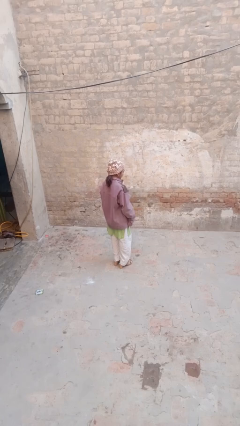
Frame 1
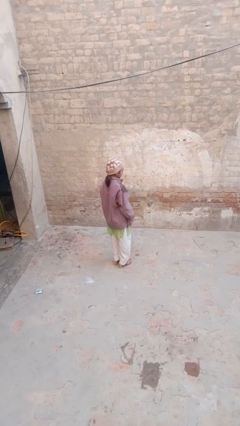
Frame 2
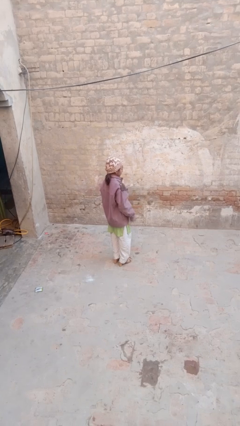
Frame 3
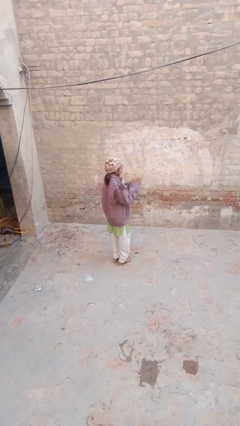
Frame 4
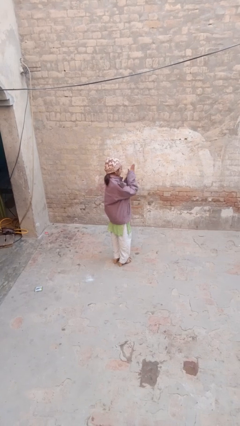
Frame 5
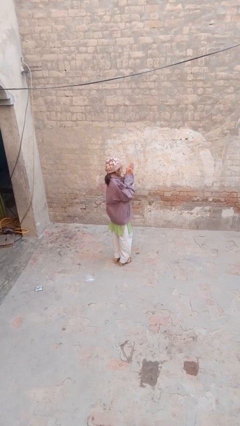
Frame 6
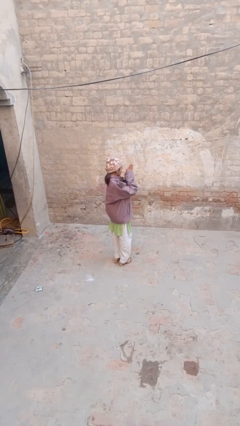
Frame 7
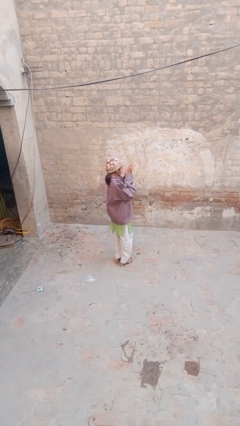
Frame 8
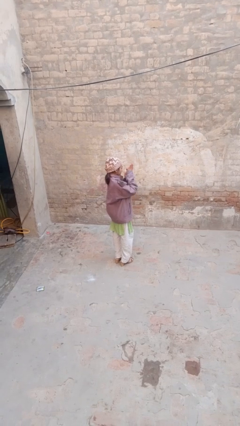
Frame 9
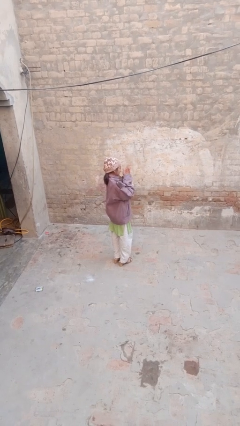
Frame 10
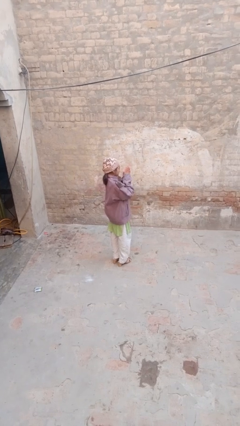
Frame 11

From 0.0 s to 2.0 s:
person blows into hands

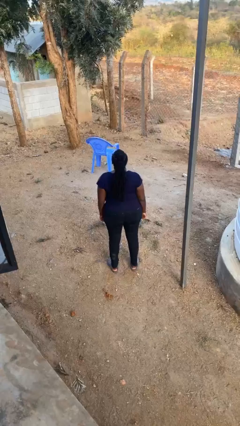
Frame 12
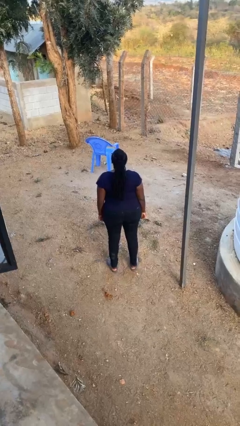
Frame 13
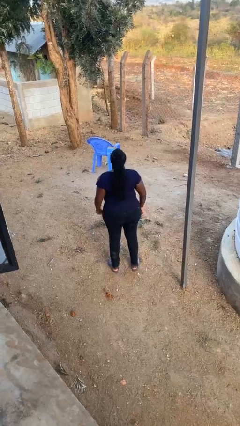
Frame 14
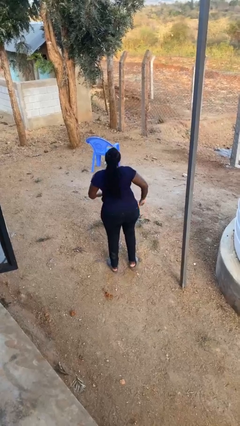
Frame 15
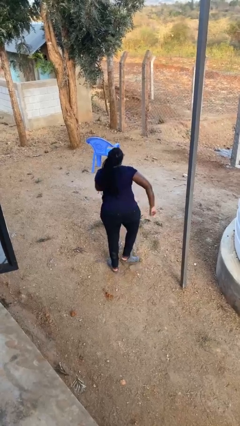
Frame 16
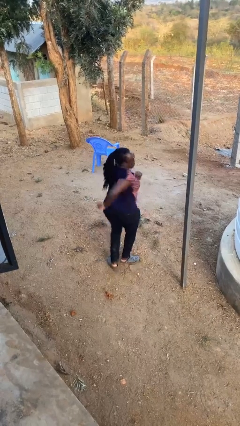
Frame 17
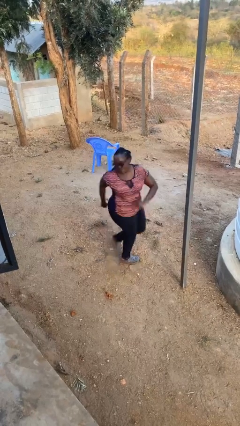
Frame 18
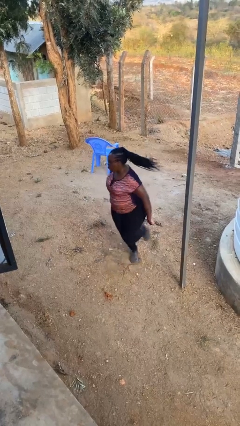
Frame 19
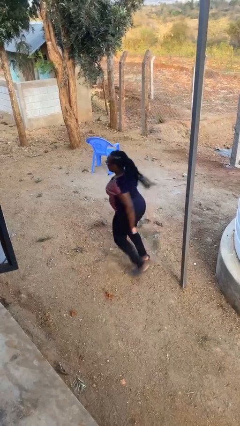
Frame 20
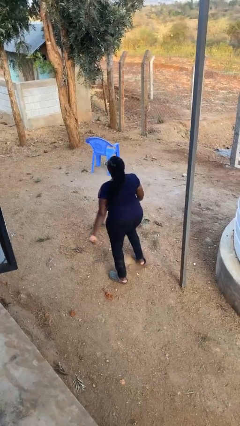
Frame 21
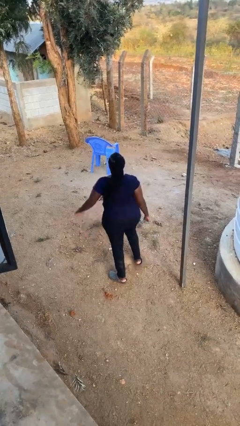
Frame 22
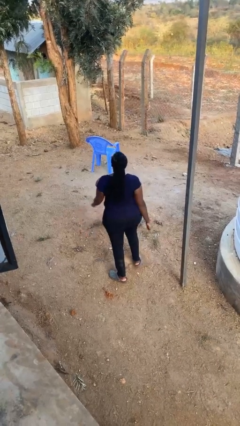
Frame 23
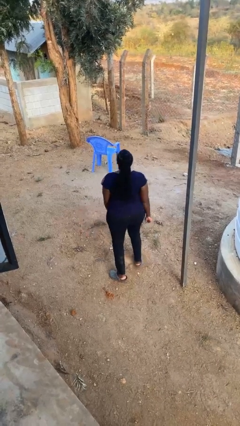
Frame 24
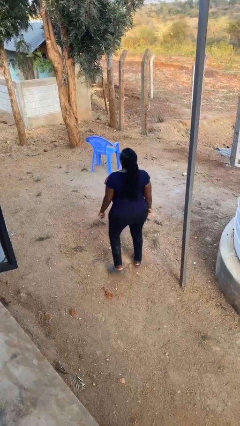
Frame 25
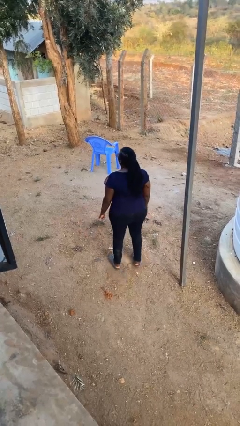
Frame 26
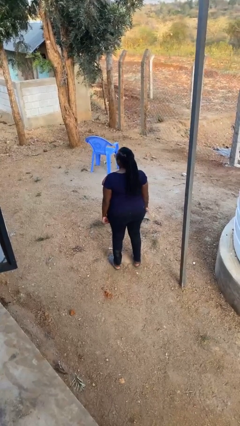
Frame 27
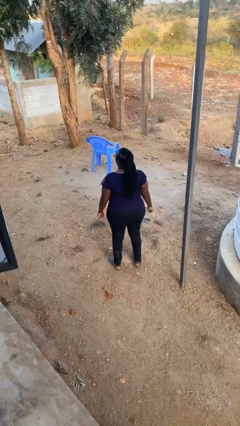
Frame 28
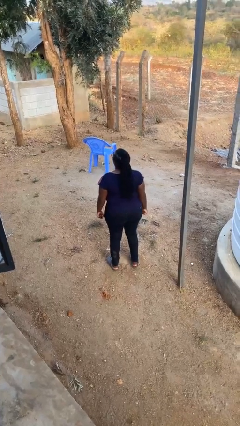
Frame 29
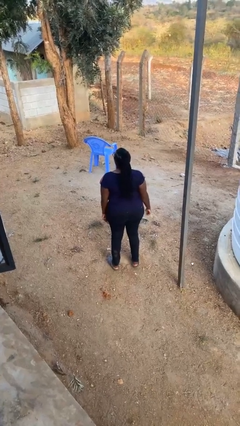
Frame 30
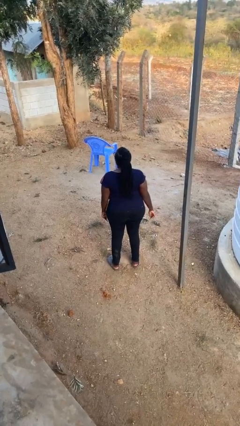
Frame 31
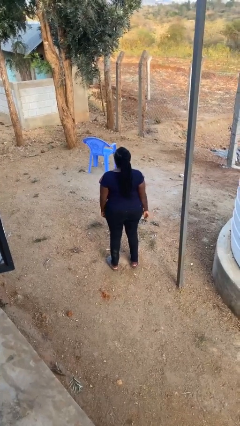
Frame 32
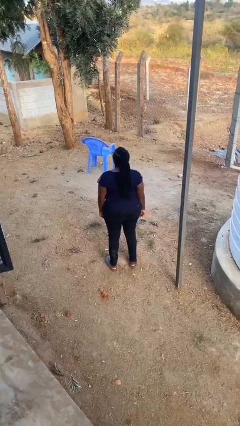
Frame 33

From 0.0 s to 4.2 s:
person twirls

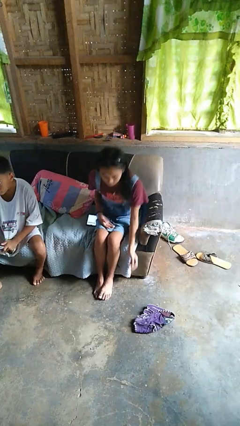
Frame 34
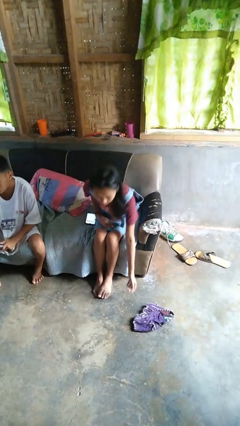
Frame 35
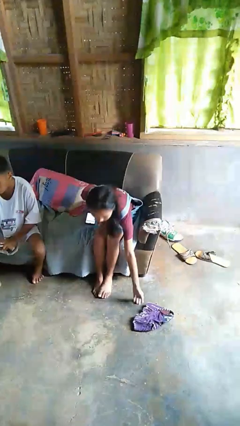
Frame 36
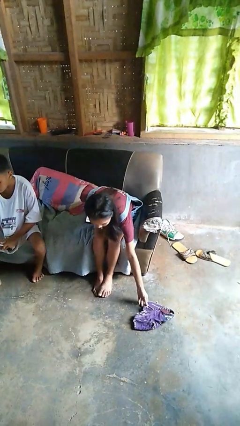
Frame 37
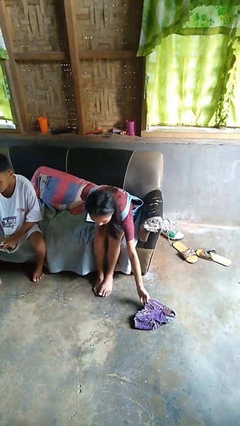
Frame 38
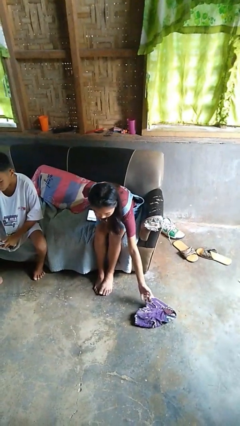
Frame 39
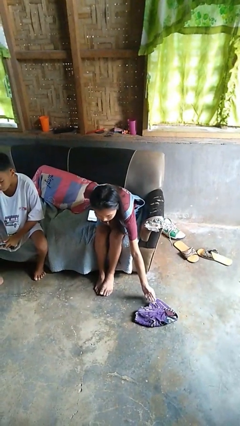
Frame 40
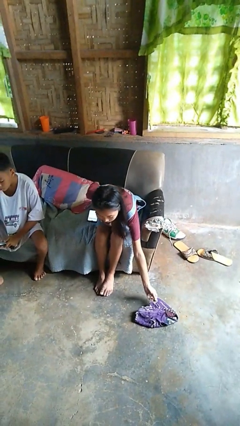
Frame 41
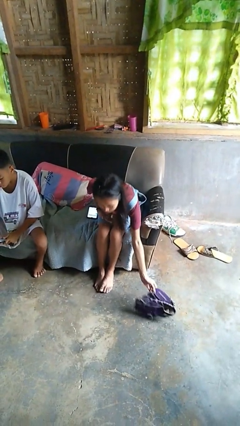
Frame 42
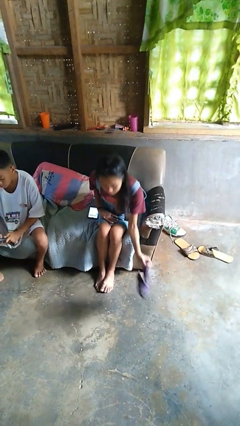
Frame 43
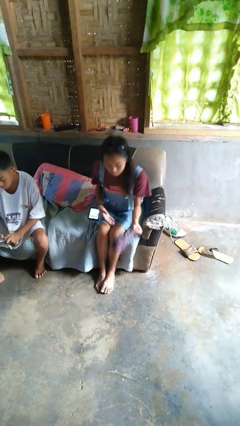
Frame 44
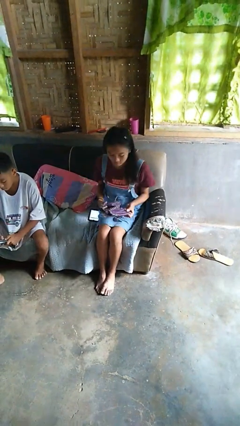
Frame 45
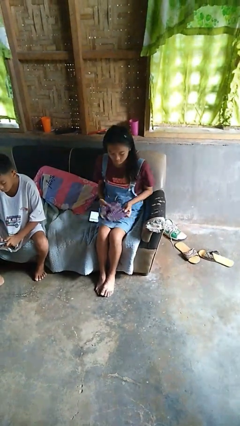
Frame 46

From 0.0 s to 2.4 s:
person picks up object from floor

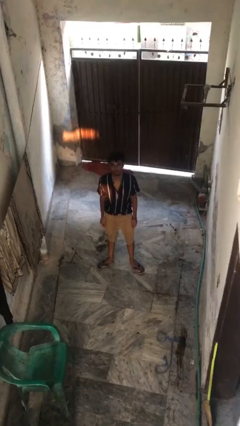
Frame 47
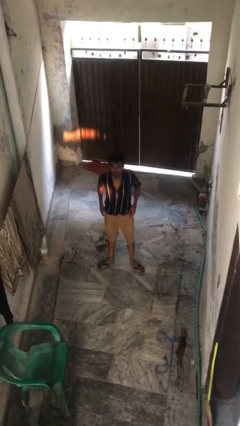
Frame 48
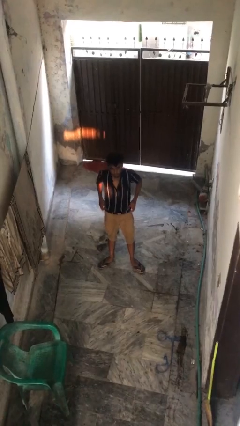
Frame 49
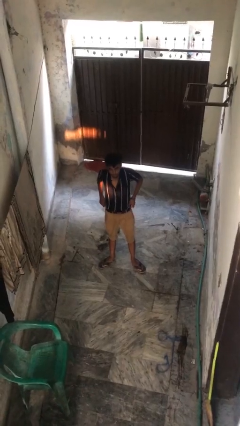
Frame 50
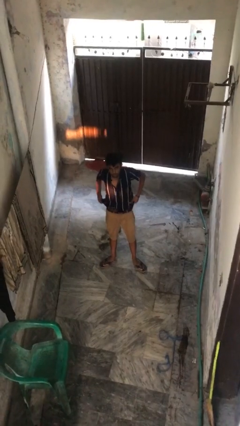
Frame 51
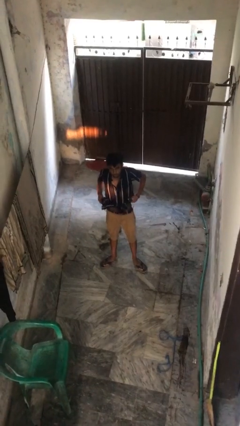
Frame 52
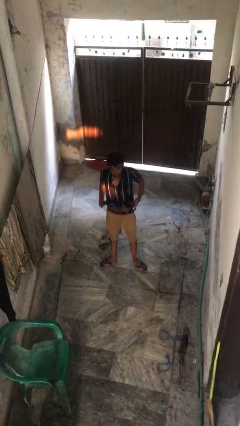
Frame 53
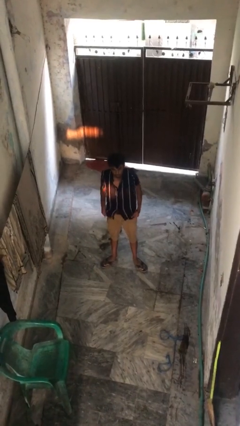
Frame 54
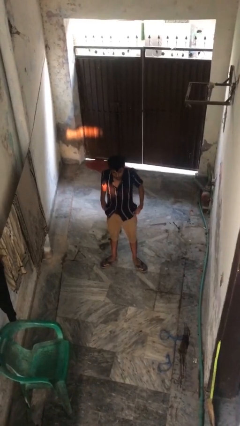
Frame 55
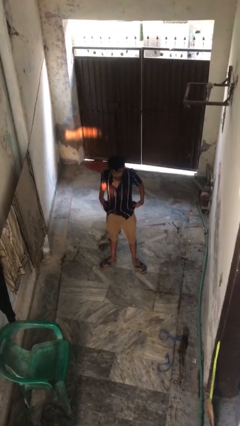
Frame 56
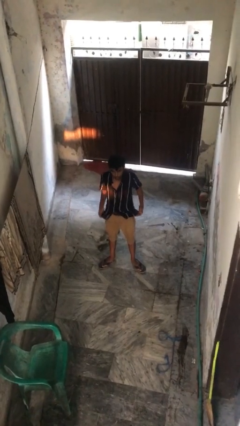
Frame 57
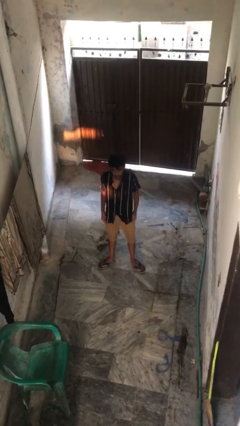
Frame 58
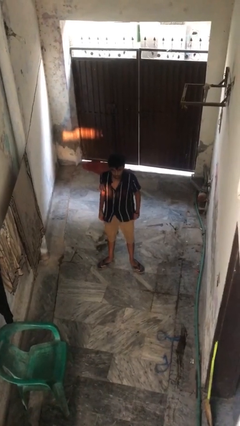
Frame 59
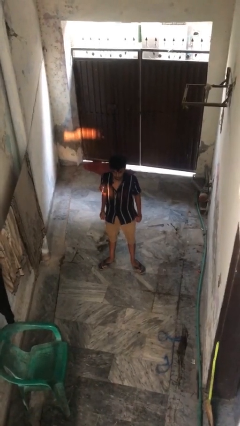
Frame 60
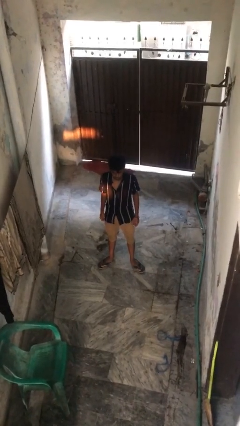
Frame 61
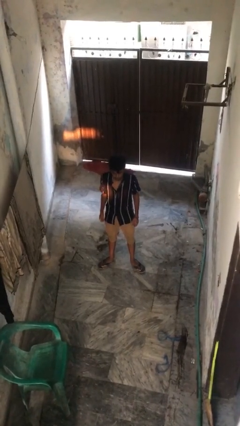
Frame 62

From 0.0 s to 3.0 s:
person untucks shirt

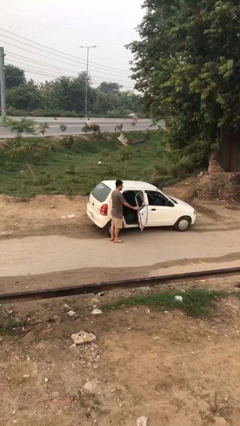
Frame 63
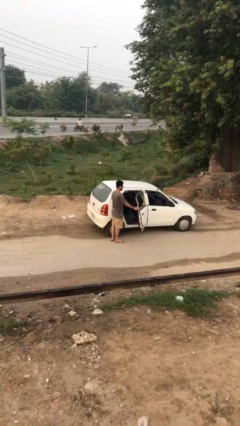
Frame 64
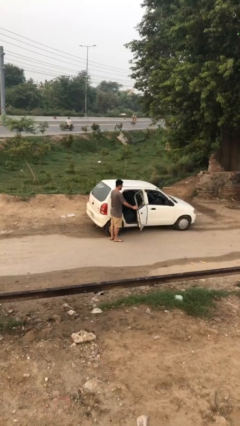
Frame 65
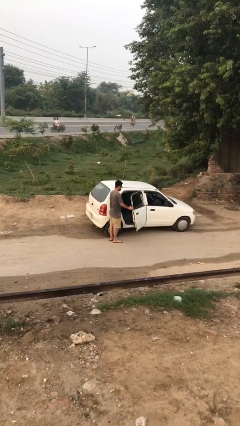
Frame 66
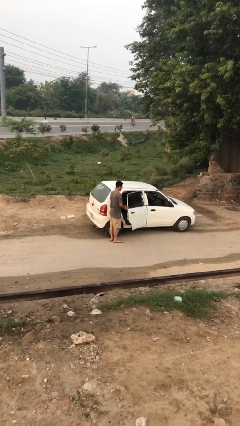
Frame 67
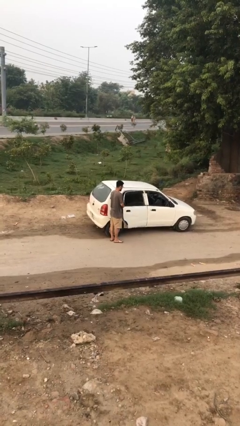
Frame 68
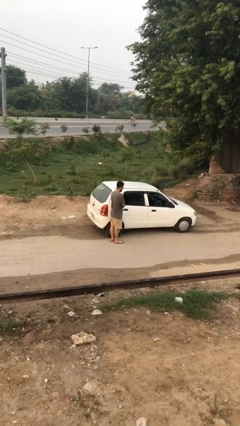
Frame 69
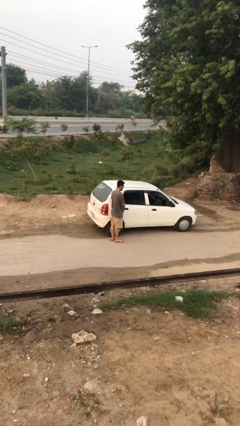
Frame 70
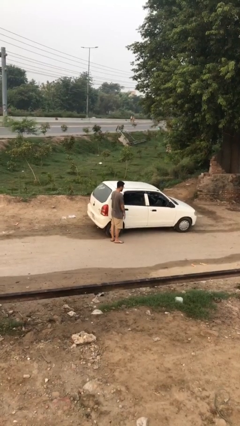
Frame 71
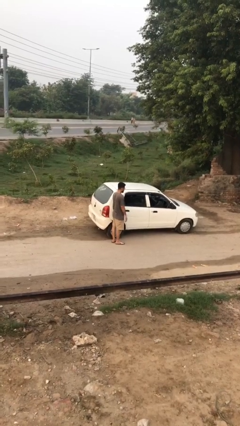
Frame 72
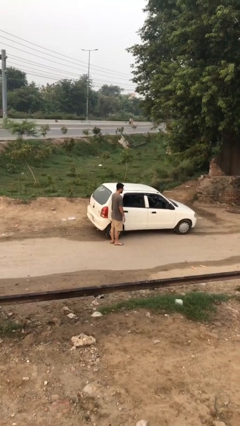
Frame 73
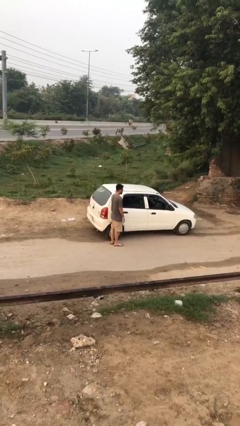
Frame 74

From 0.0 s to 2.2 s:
person closes car door

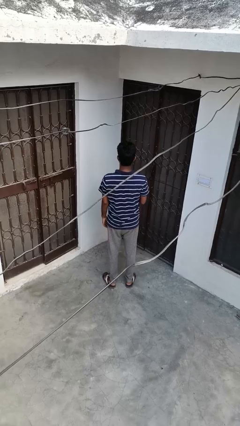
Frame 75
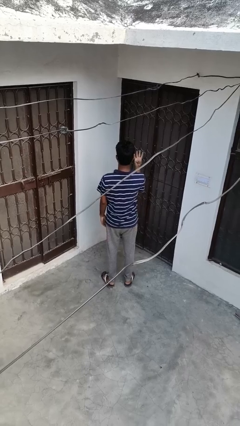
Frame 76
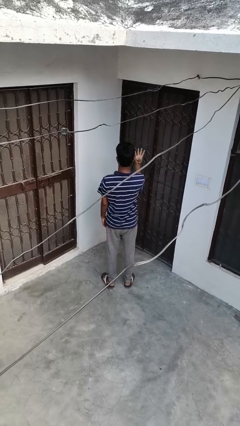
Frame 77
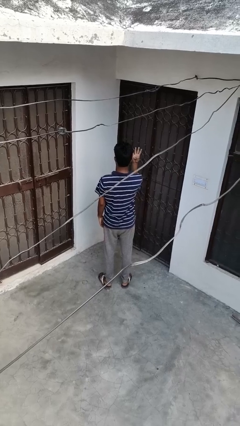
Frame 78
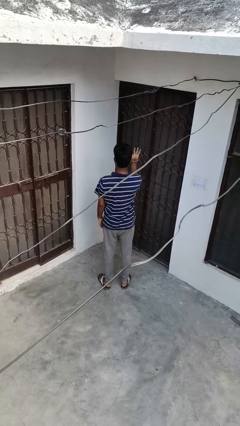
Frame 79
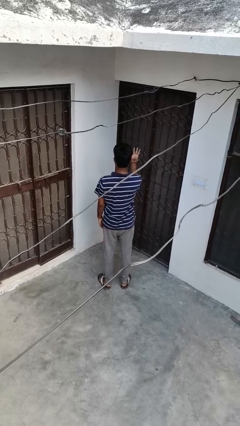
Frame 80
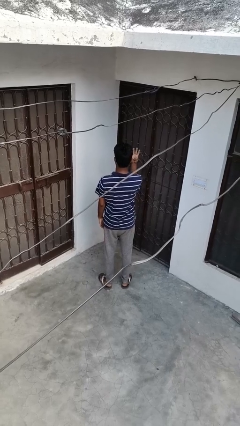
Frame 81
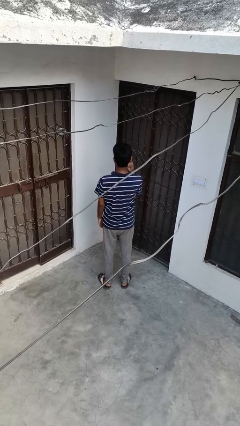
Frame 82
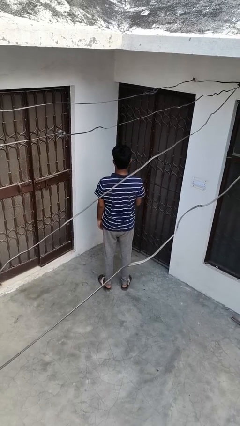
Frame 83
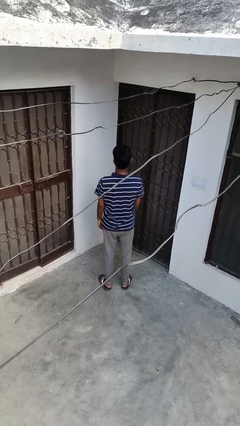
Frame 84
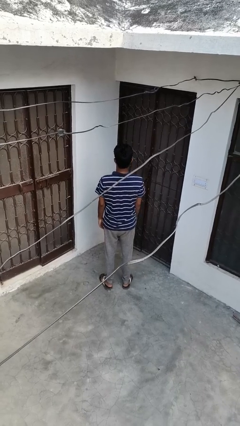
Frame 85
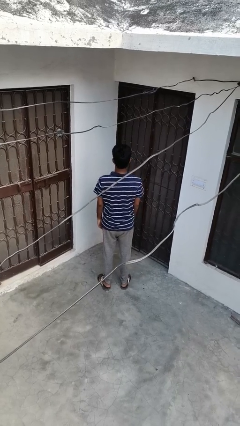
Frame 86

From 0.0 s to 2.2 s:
person gestures number four

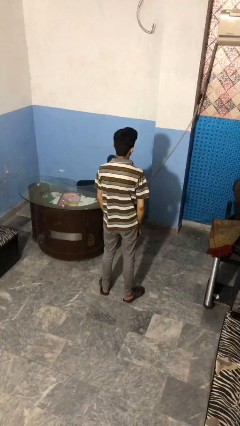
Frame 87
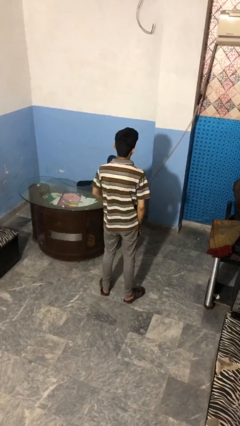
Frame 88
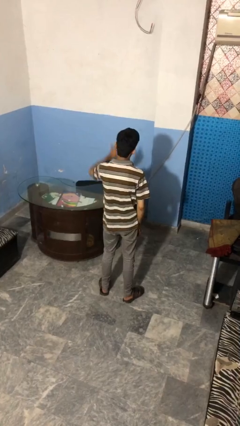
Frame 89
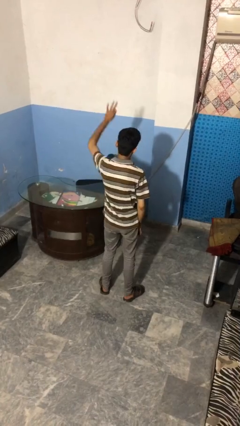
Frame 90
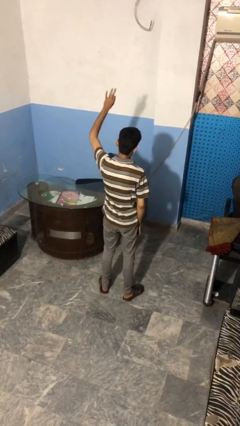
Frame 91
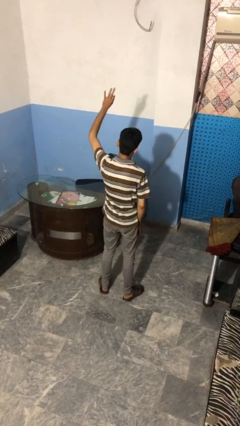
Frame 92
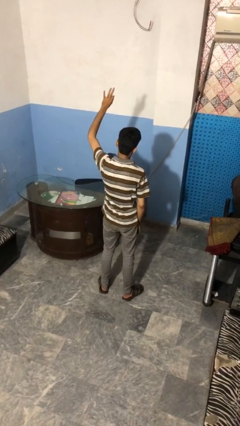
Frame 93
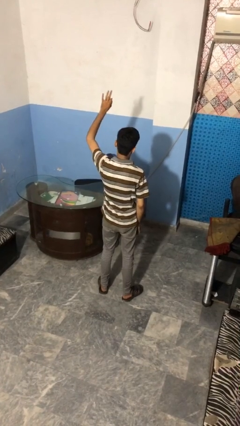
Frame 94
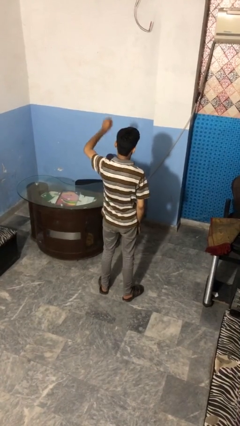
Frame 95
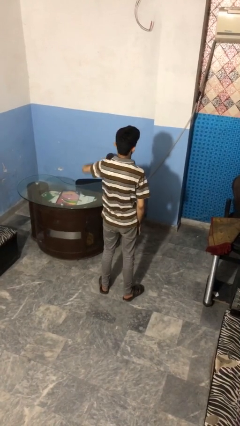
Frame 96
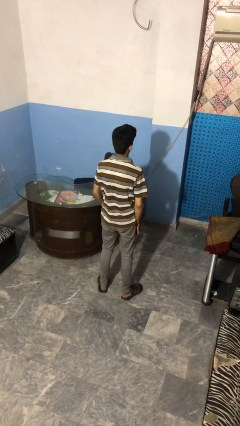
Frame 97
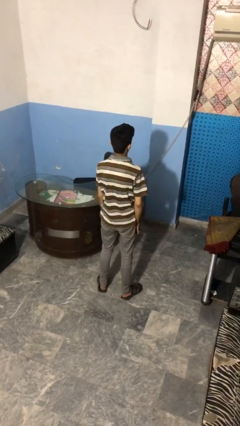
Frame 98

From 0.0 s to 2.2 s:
person gestures number three
